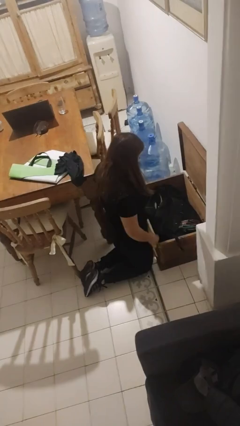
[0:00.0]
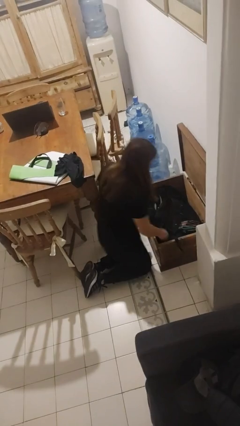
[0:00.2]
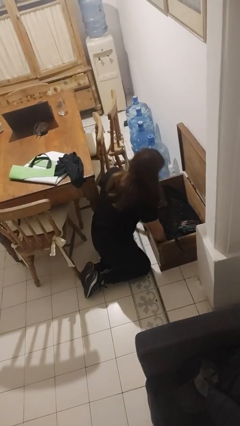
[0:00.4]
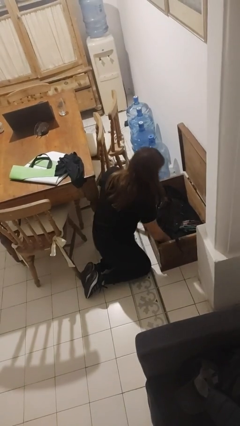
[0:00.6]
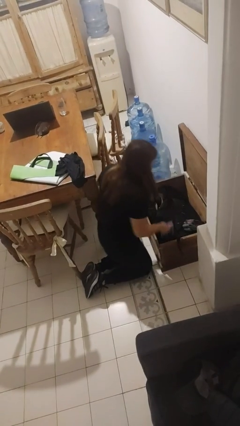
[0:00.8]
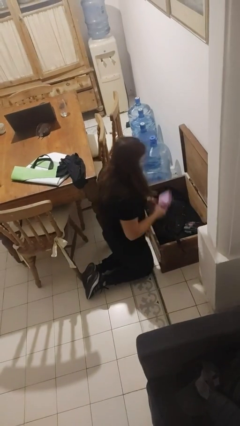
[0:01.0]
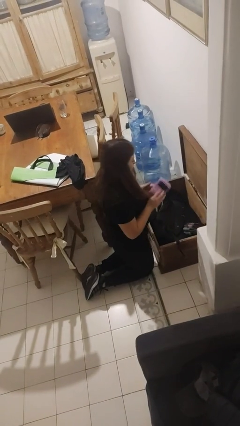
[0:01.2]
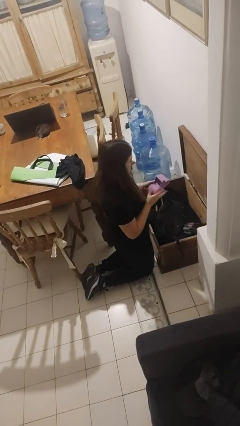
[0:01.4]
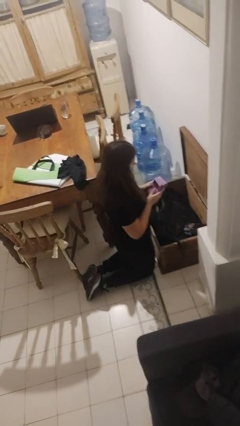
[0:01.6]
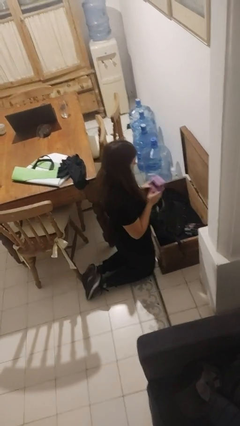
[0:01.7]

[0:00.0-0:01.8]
person takes object from box

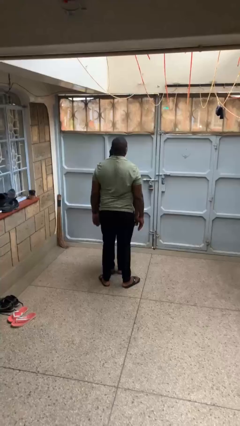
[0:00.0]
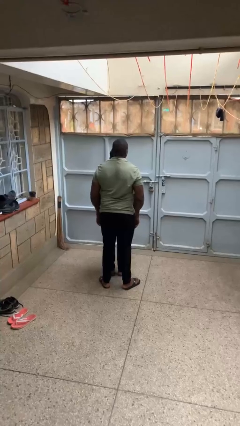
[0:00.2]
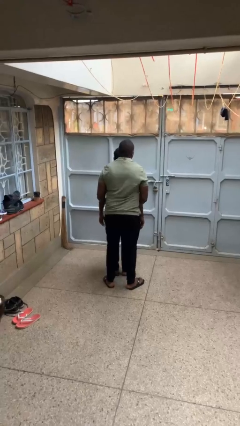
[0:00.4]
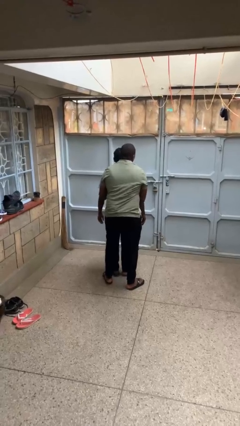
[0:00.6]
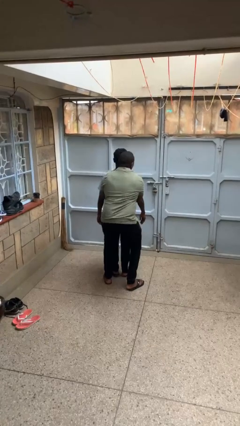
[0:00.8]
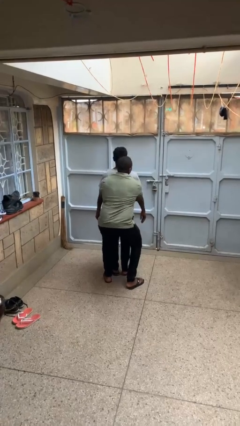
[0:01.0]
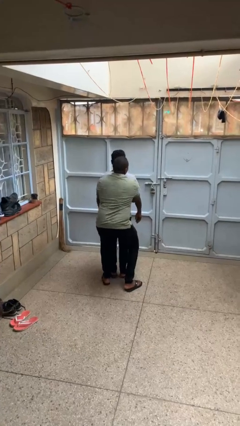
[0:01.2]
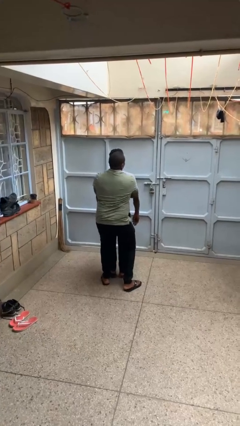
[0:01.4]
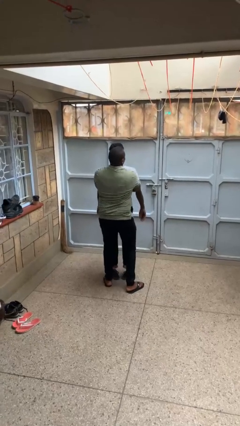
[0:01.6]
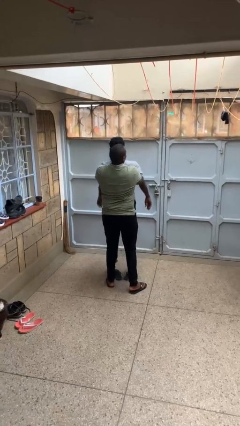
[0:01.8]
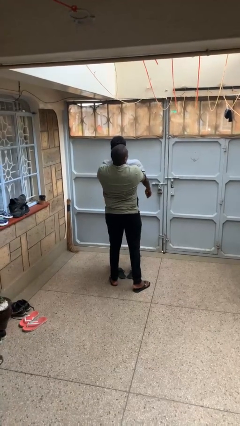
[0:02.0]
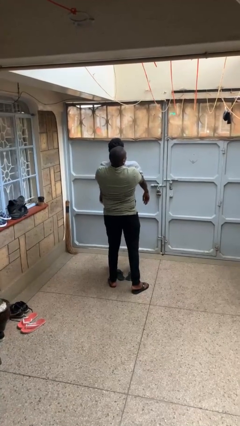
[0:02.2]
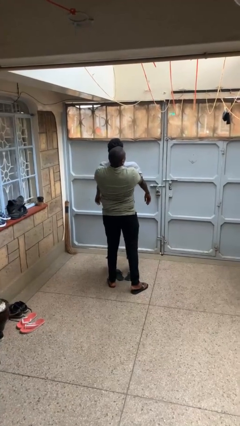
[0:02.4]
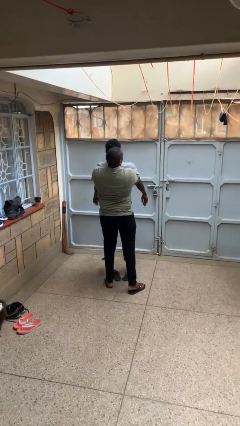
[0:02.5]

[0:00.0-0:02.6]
person picks up person

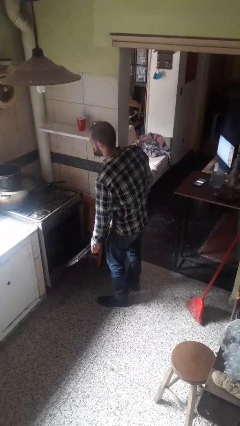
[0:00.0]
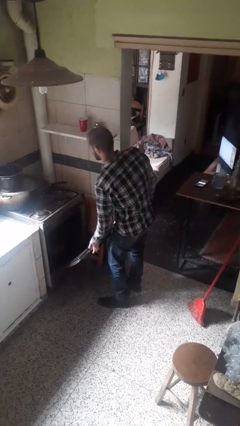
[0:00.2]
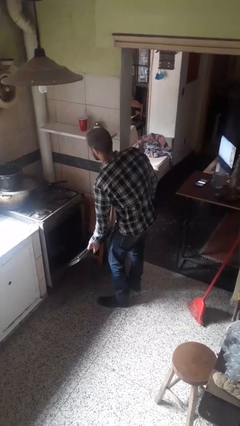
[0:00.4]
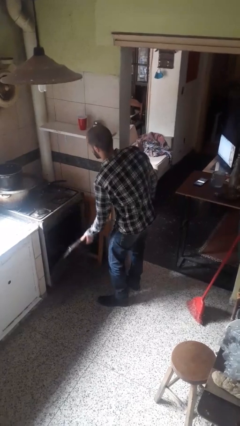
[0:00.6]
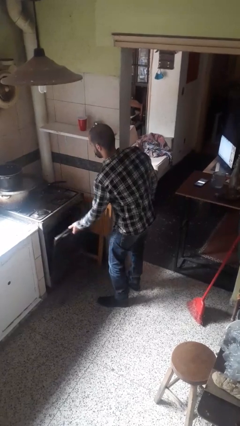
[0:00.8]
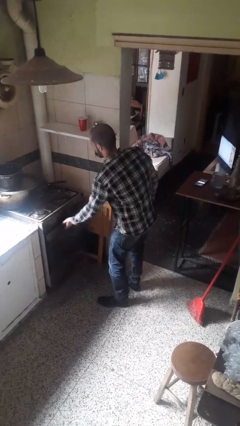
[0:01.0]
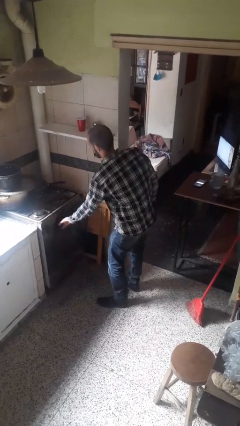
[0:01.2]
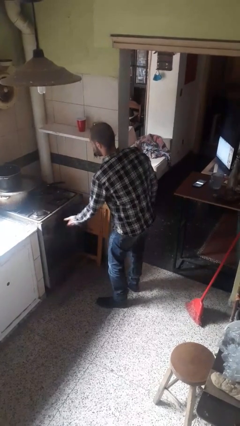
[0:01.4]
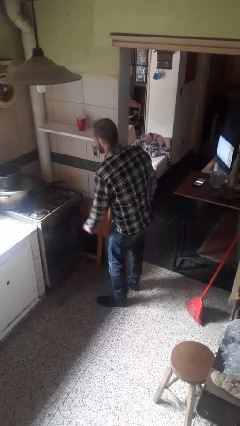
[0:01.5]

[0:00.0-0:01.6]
person closes oven door

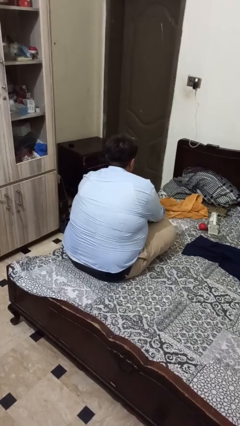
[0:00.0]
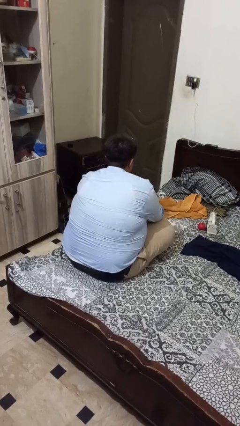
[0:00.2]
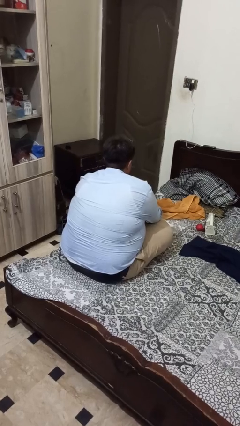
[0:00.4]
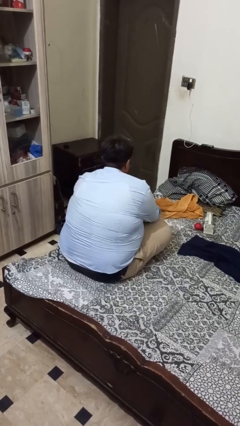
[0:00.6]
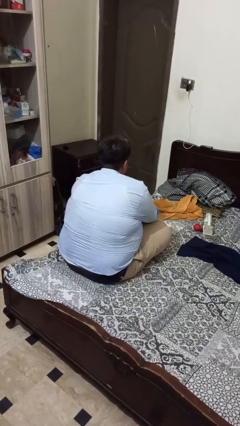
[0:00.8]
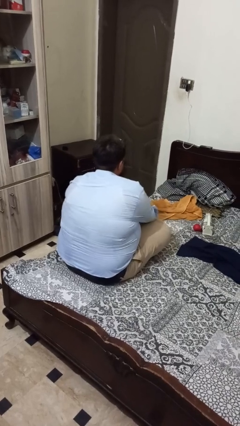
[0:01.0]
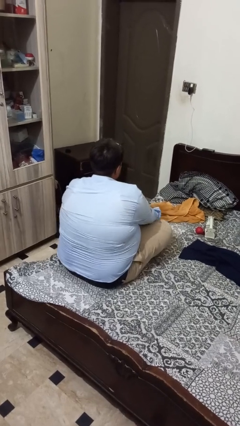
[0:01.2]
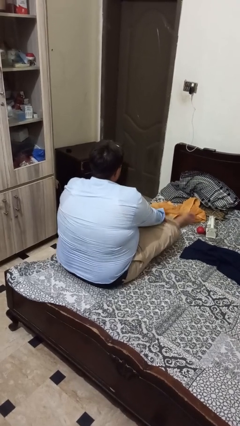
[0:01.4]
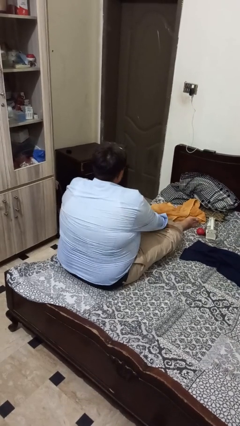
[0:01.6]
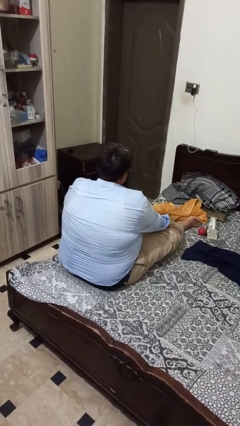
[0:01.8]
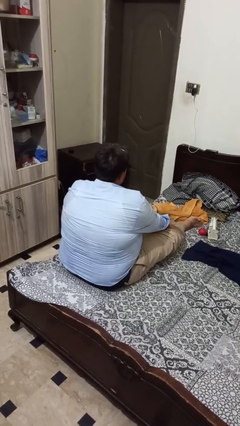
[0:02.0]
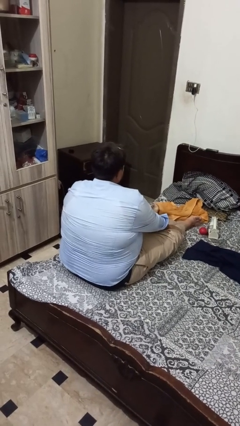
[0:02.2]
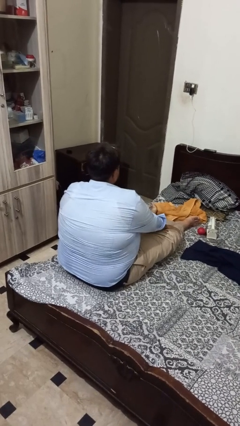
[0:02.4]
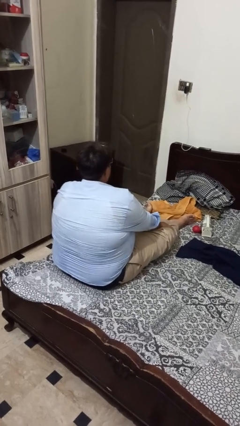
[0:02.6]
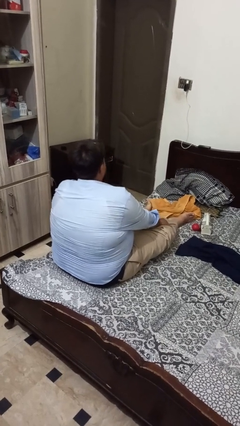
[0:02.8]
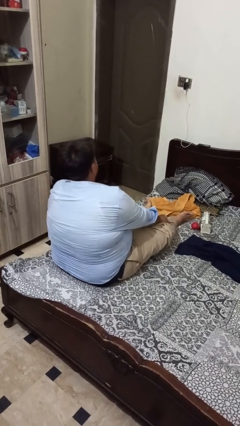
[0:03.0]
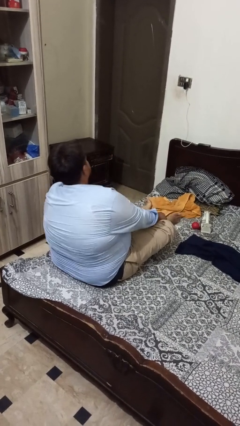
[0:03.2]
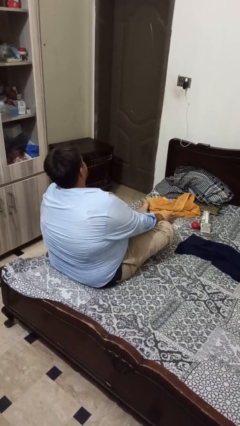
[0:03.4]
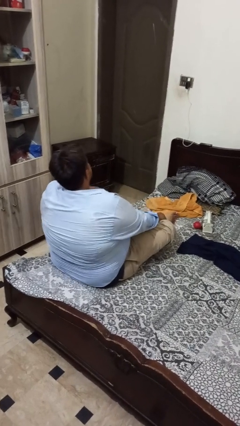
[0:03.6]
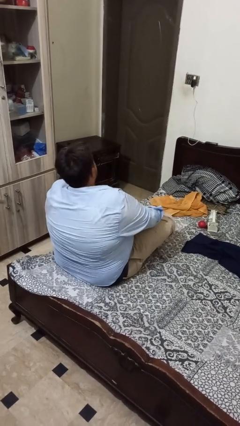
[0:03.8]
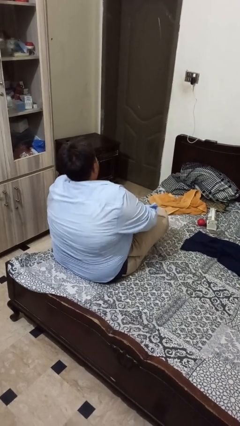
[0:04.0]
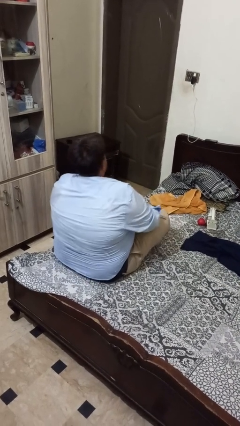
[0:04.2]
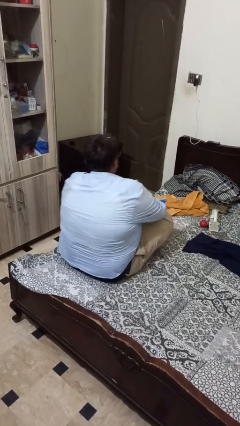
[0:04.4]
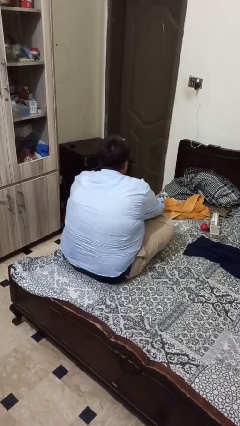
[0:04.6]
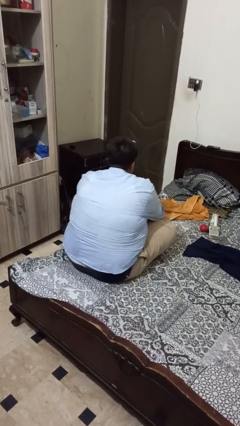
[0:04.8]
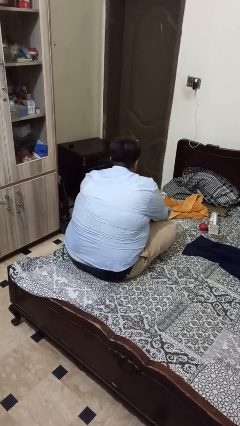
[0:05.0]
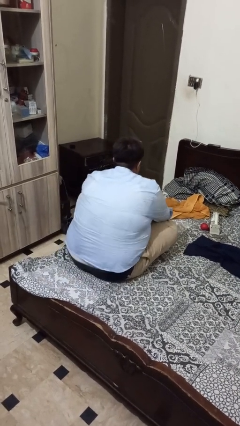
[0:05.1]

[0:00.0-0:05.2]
person crosses legs

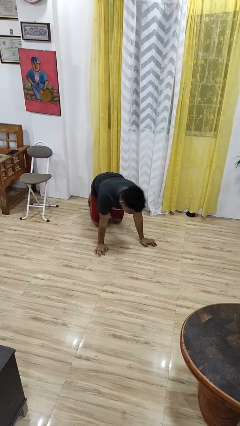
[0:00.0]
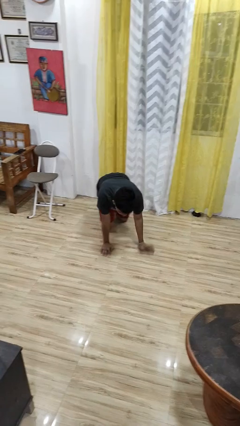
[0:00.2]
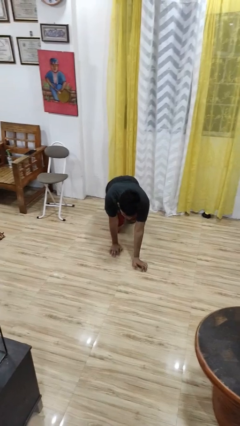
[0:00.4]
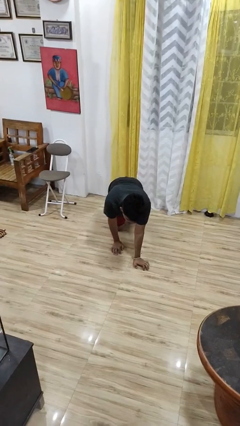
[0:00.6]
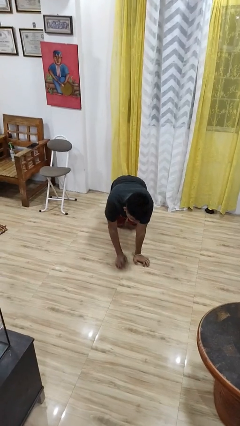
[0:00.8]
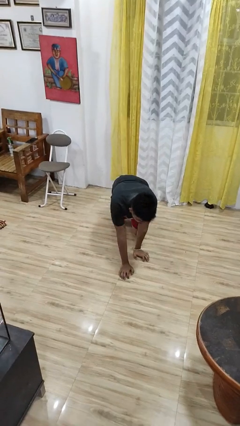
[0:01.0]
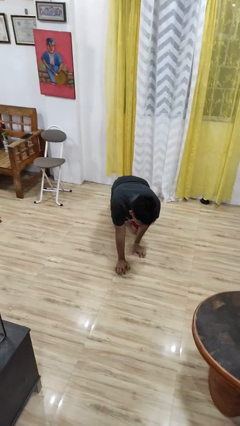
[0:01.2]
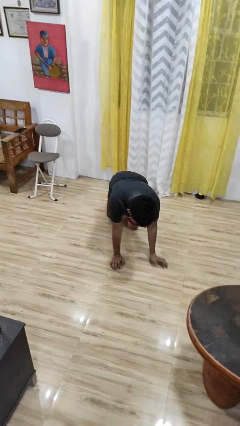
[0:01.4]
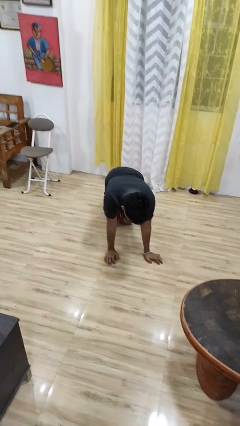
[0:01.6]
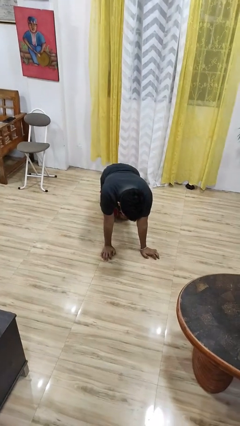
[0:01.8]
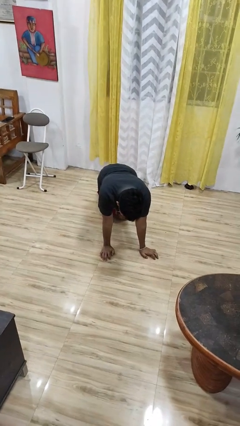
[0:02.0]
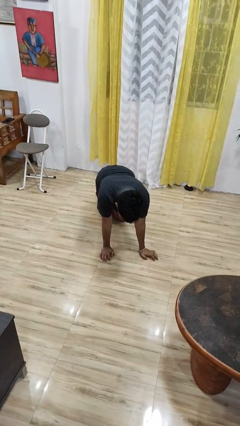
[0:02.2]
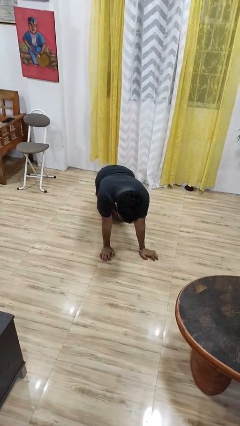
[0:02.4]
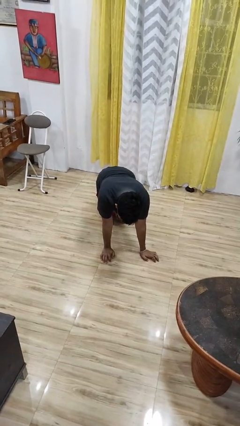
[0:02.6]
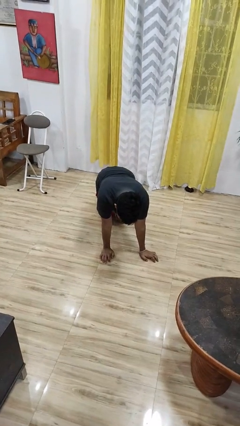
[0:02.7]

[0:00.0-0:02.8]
person crawls

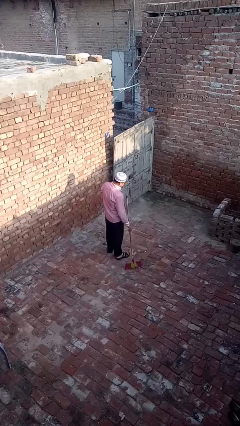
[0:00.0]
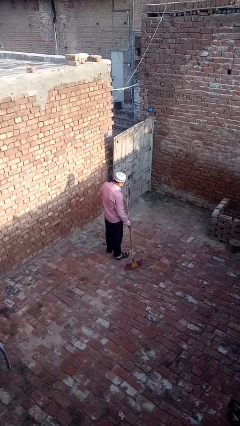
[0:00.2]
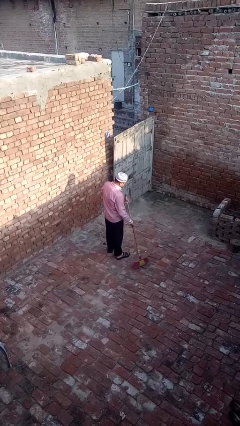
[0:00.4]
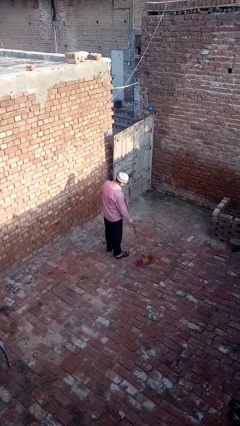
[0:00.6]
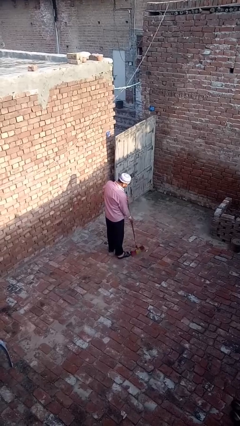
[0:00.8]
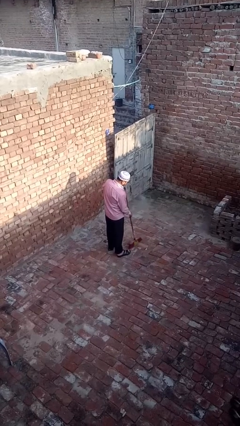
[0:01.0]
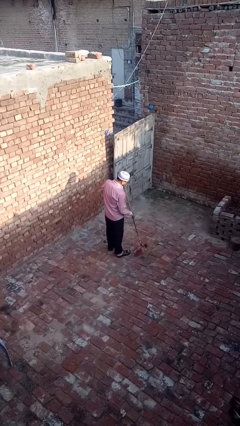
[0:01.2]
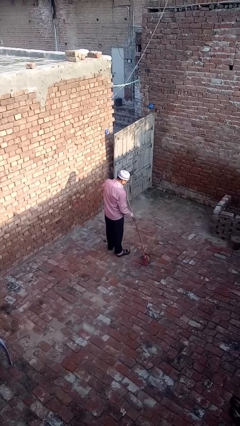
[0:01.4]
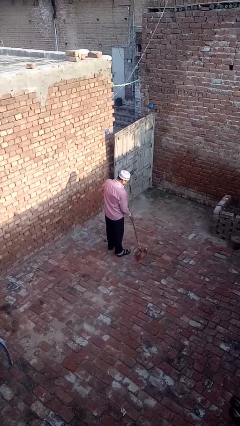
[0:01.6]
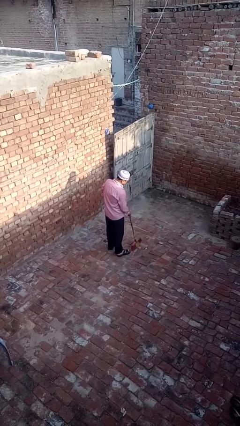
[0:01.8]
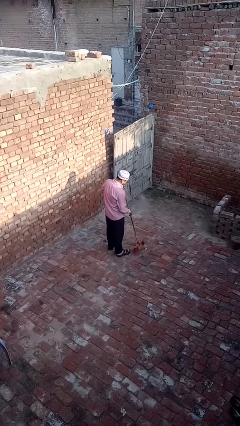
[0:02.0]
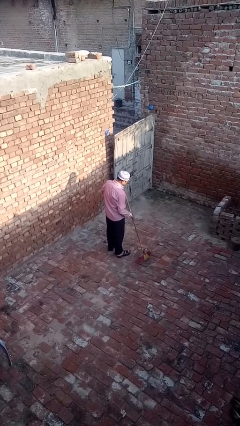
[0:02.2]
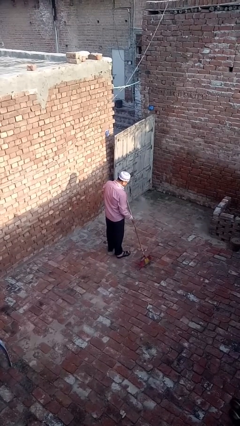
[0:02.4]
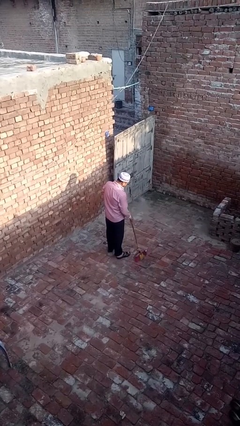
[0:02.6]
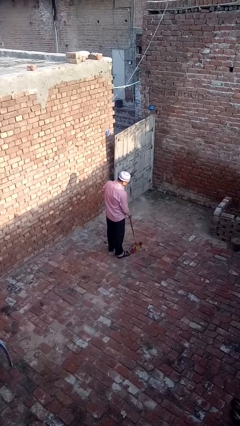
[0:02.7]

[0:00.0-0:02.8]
person sweeps floor

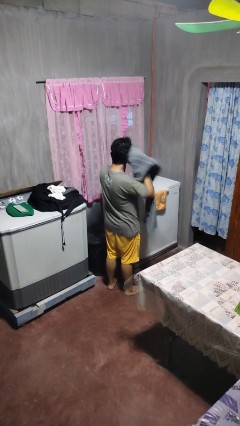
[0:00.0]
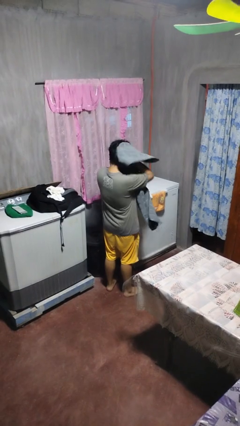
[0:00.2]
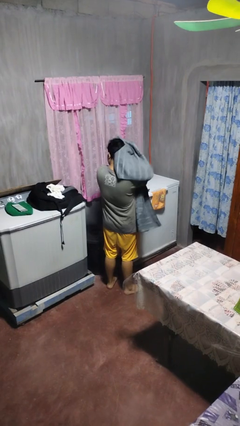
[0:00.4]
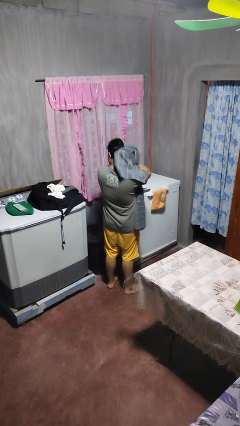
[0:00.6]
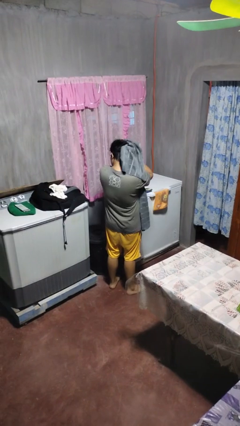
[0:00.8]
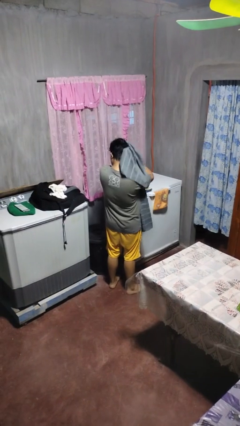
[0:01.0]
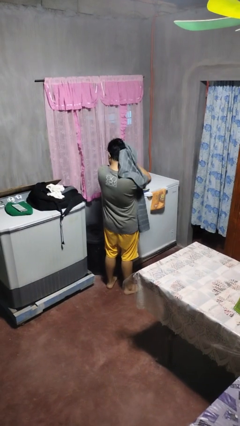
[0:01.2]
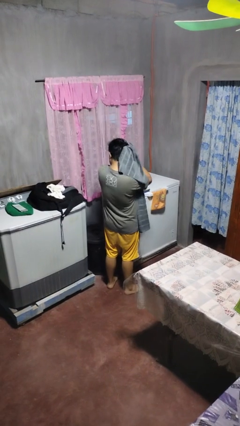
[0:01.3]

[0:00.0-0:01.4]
person dries hair with towel
